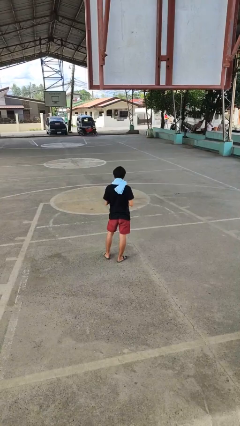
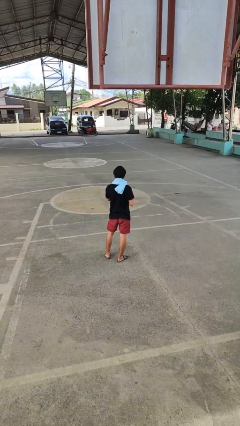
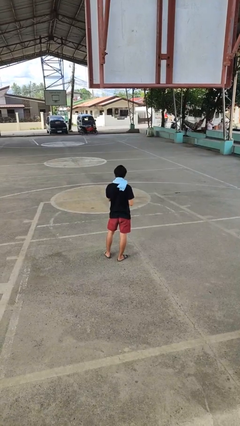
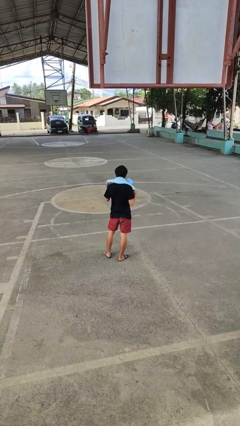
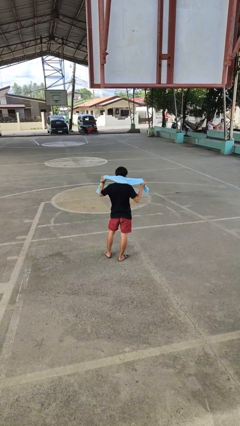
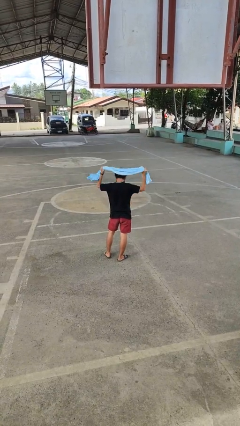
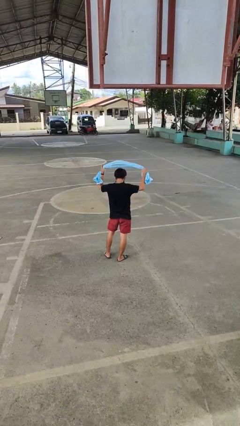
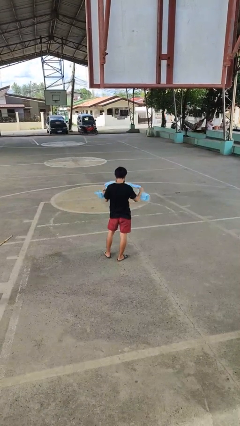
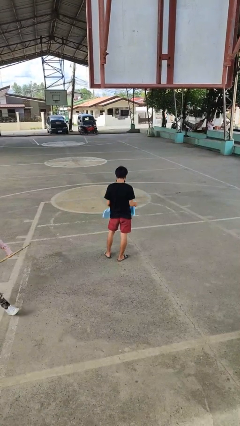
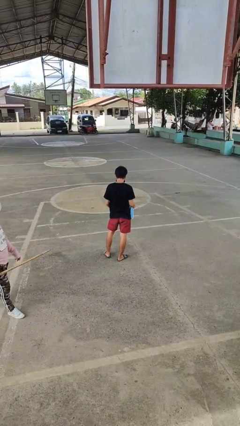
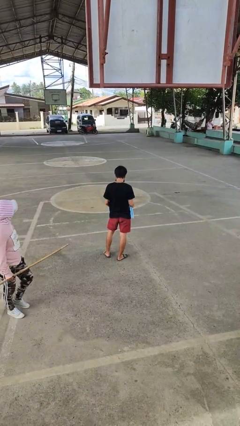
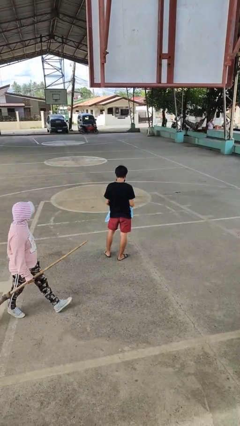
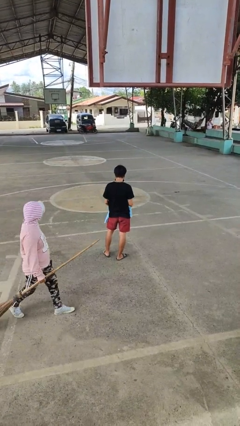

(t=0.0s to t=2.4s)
person takes off scarf

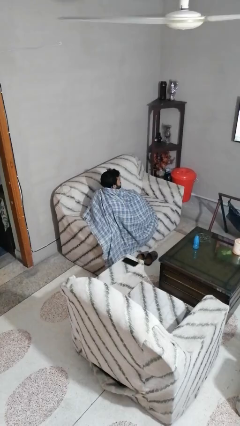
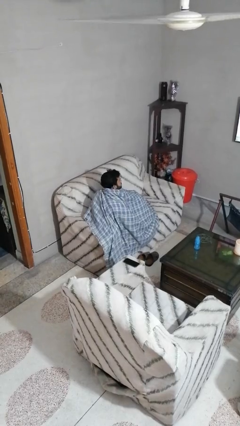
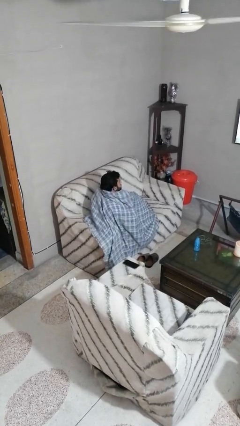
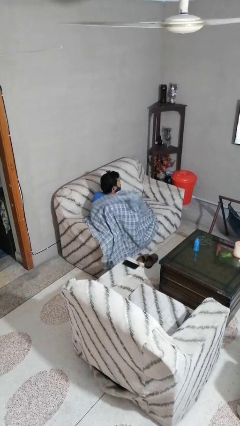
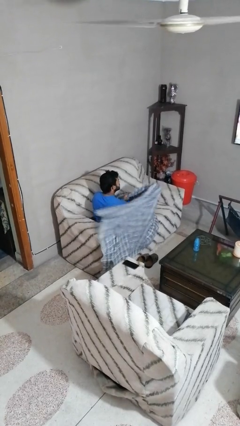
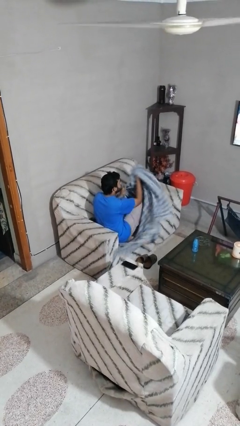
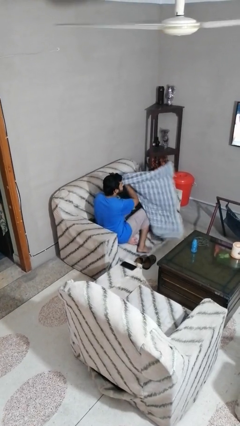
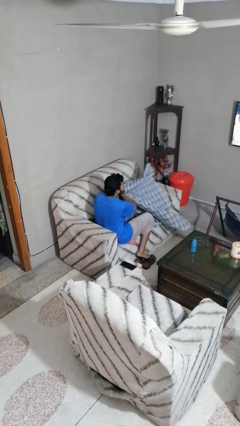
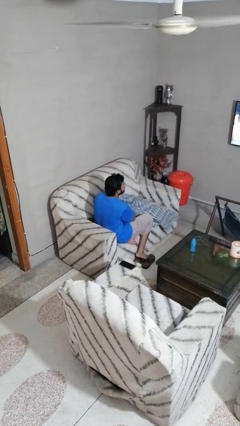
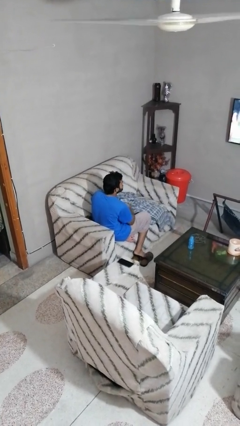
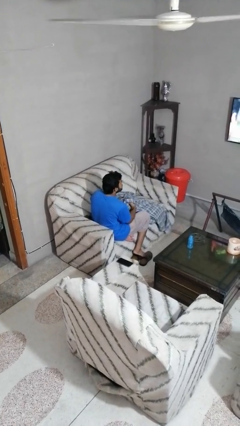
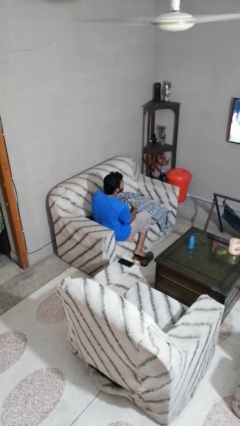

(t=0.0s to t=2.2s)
person uncovers with blanket

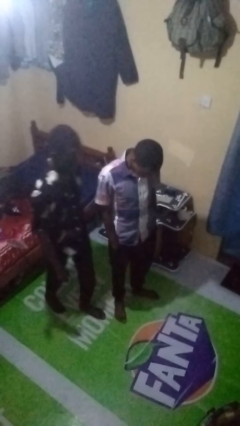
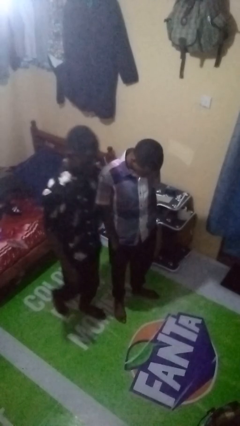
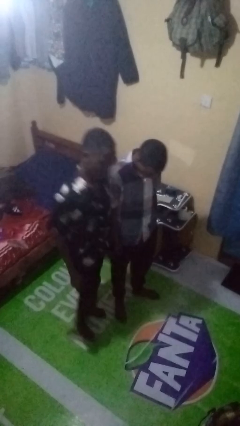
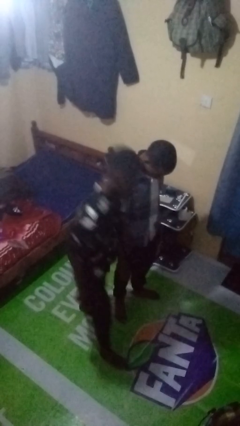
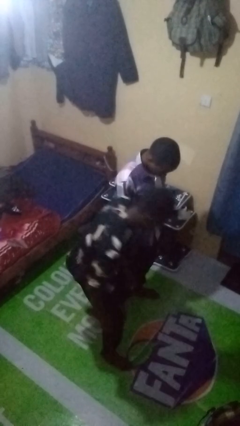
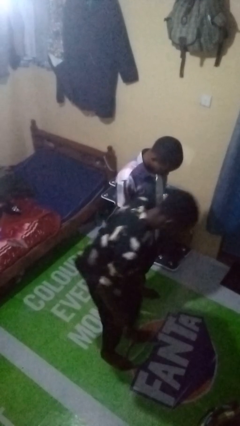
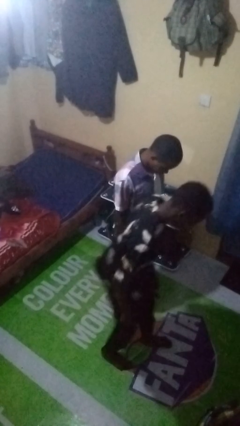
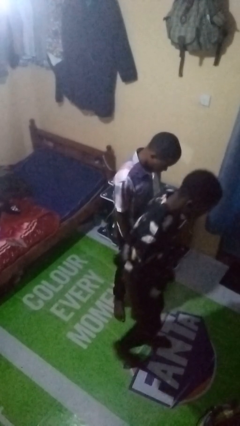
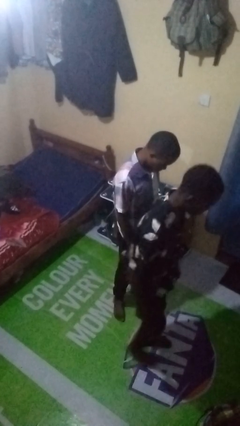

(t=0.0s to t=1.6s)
person bumps into person

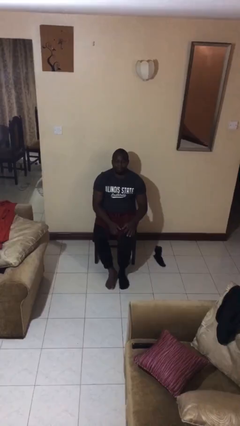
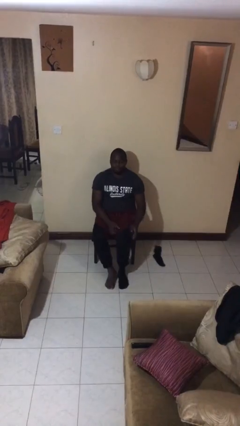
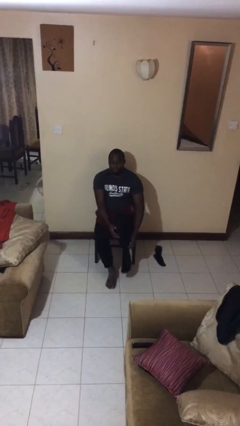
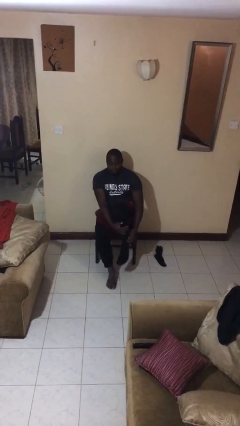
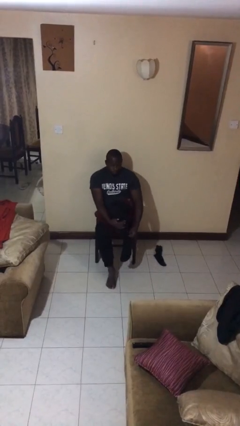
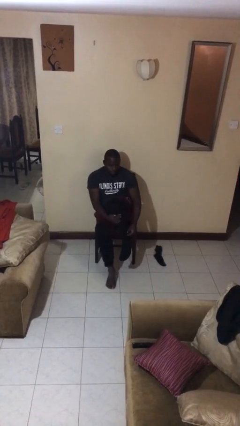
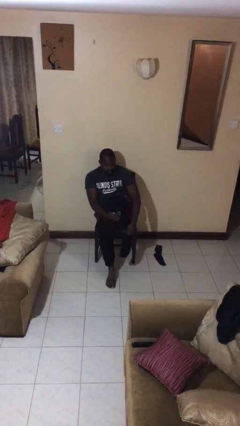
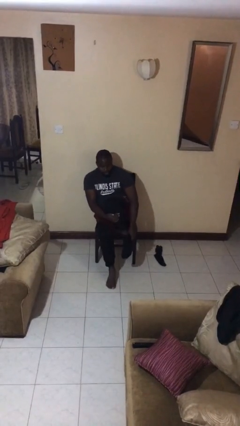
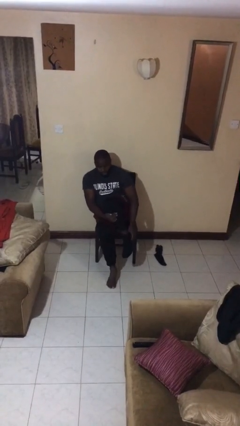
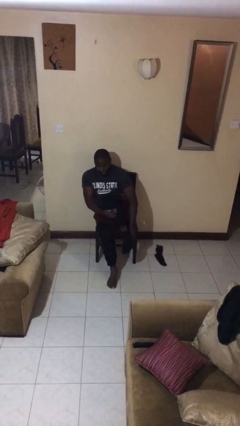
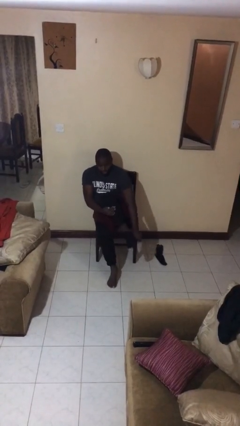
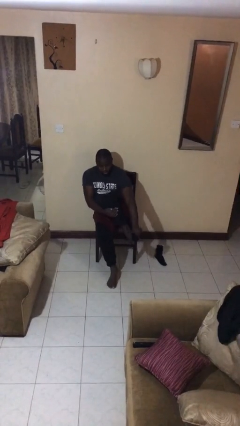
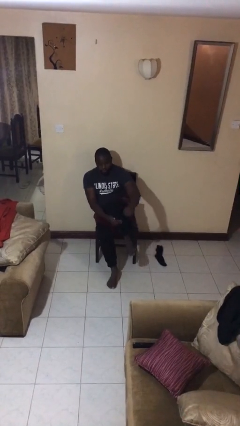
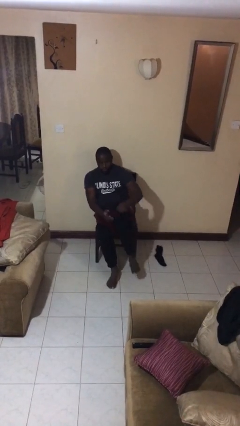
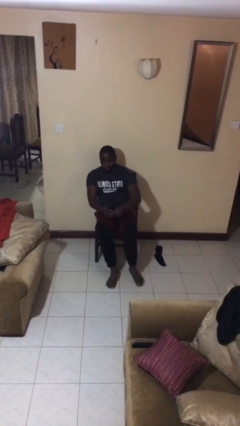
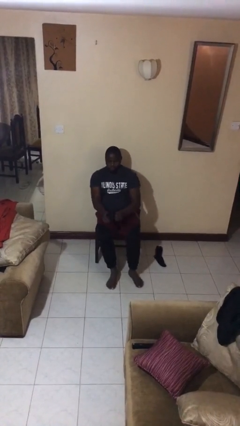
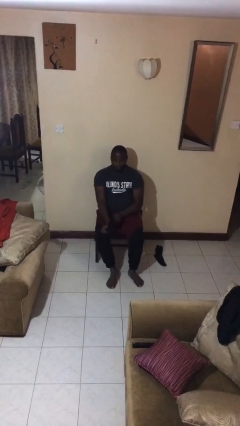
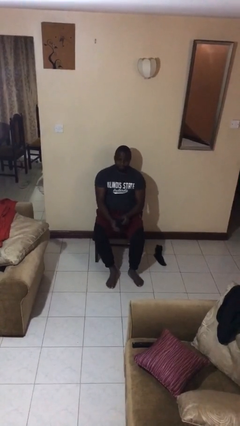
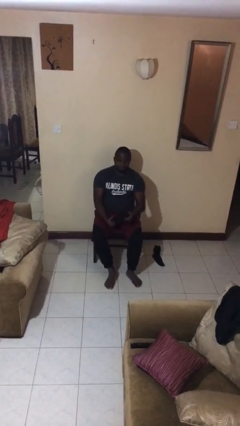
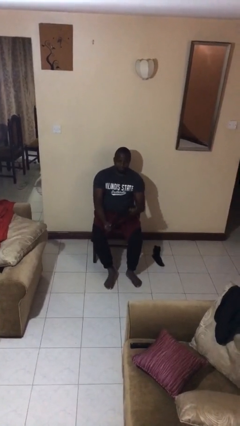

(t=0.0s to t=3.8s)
person takes off socks

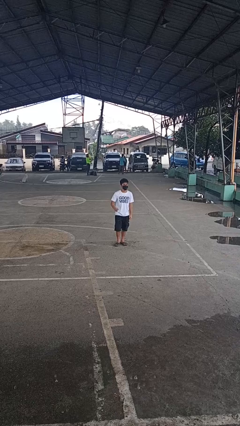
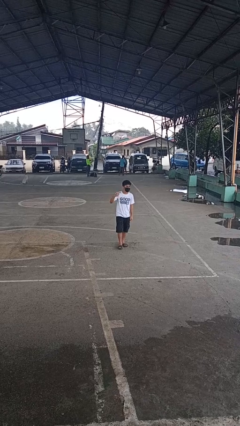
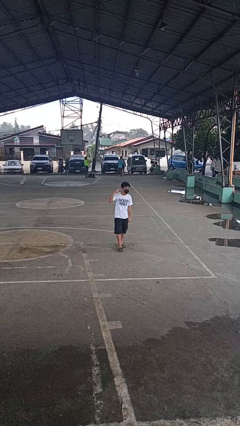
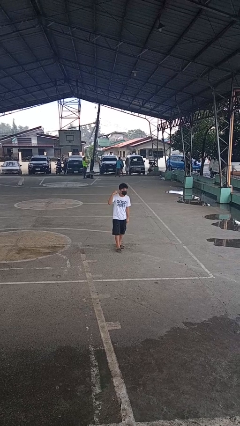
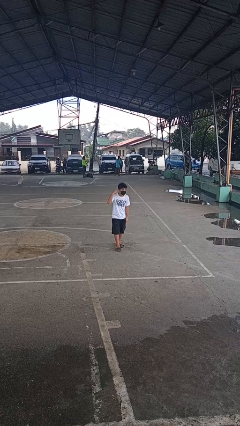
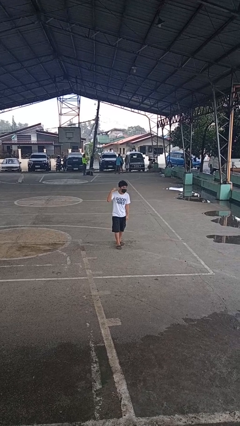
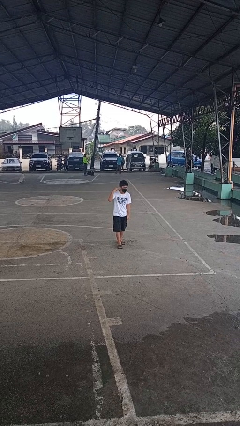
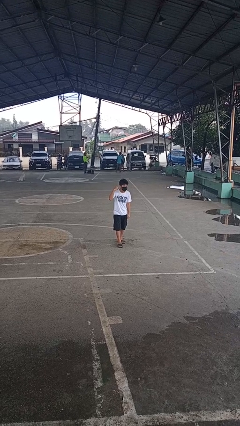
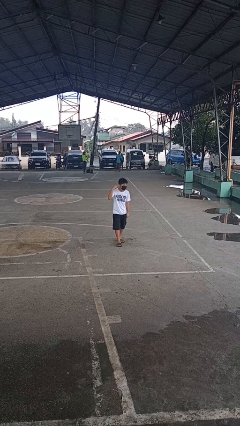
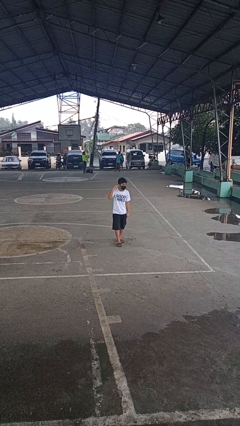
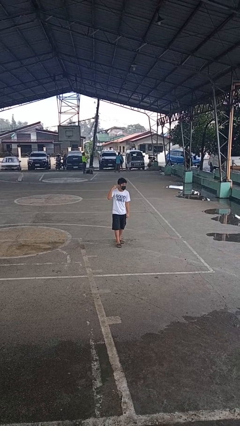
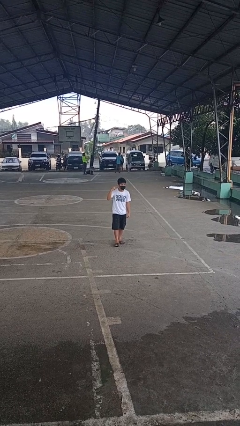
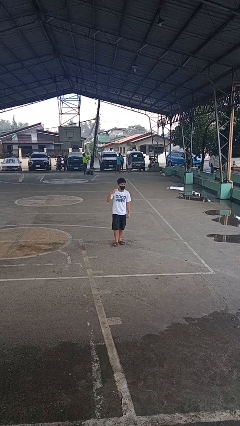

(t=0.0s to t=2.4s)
person gestures listen closely

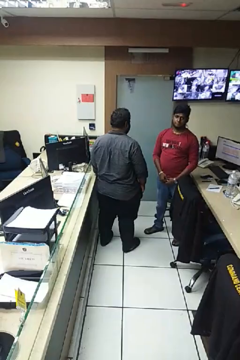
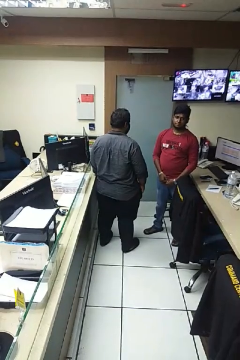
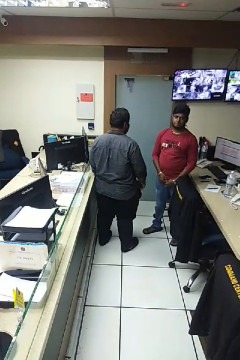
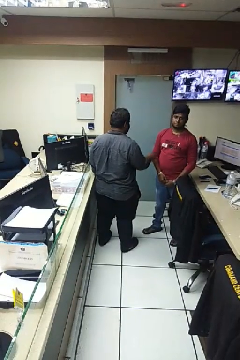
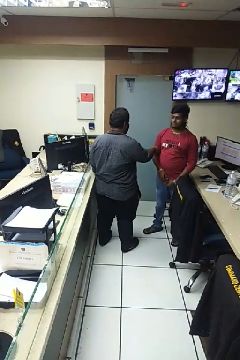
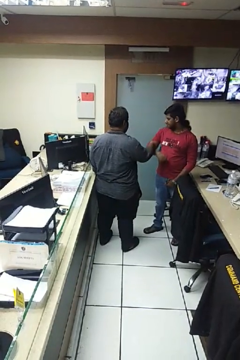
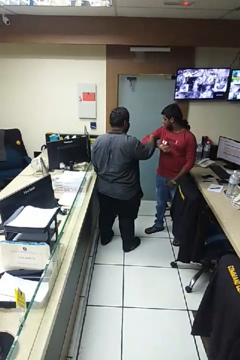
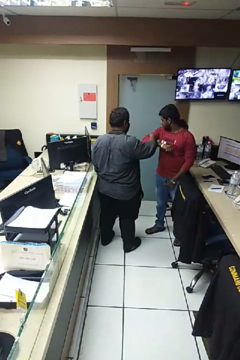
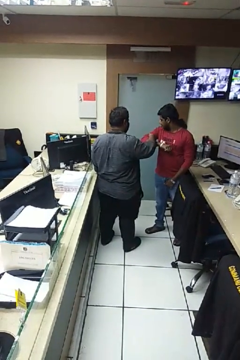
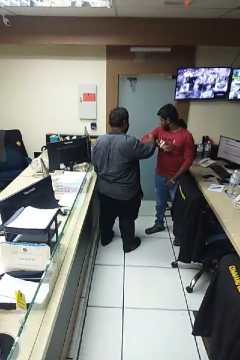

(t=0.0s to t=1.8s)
person grabs person by bicep

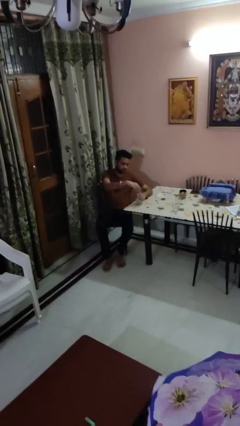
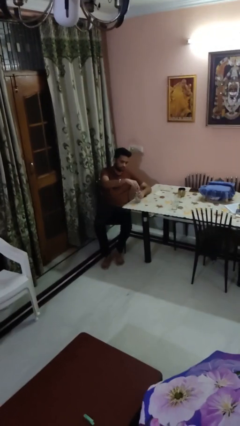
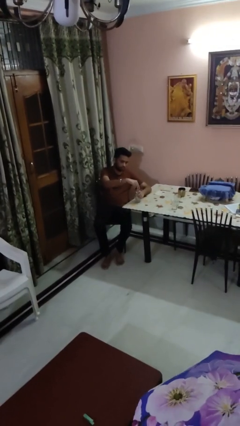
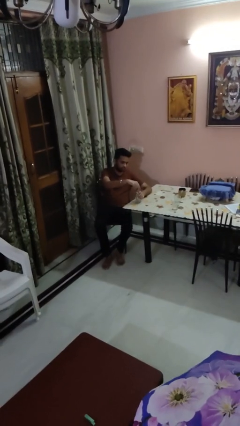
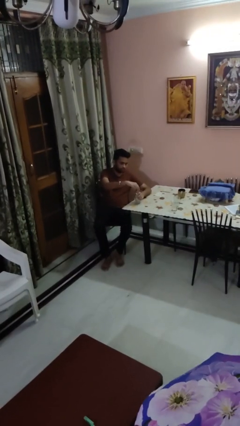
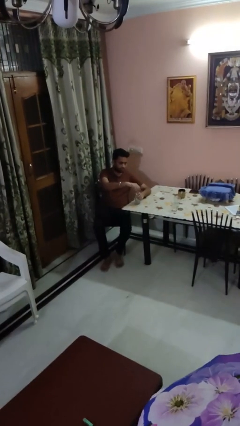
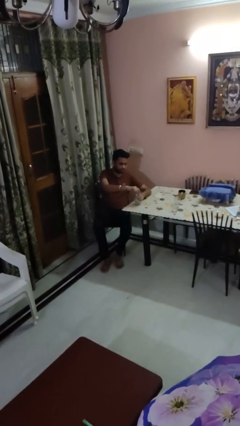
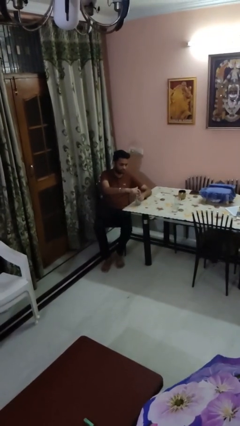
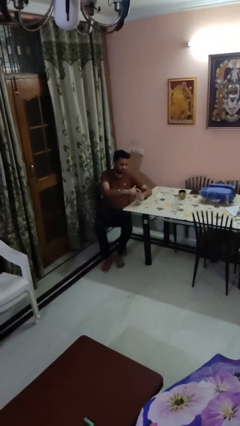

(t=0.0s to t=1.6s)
person screws lid to bottle

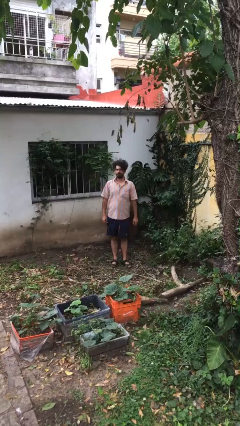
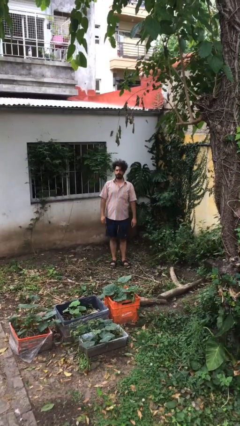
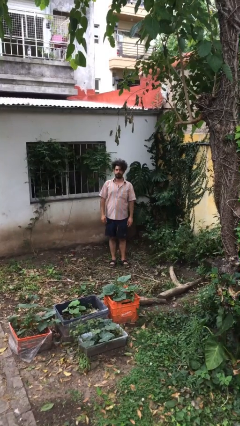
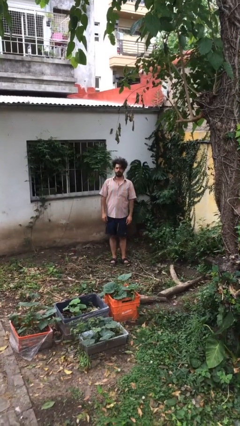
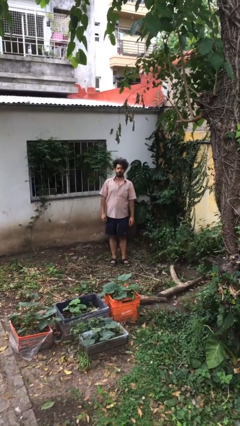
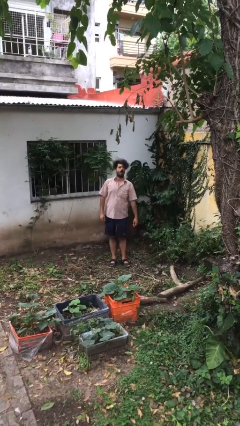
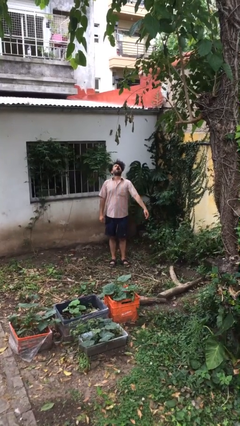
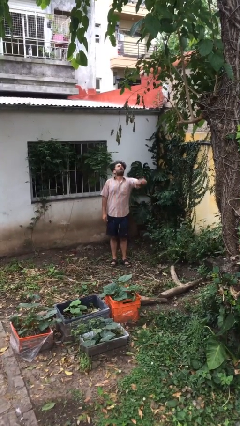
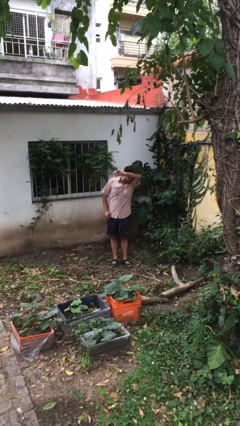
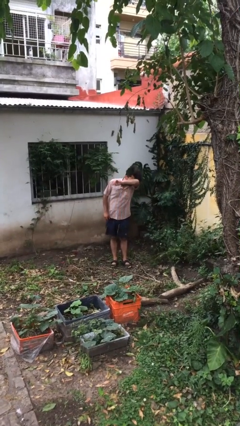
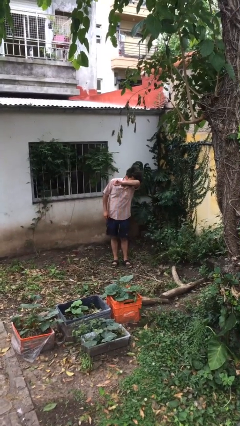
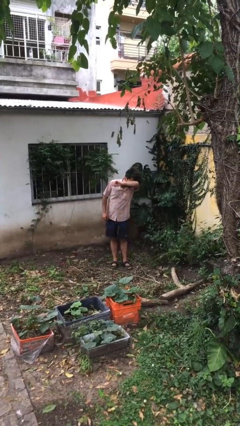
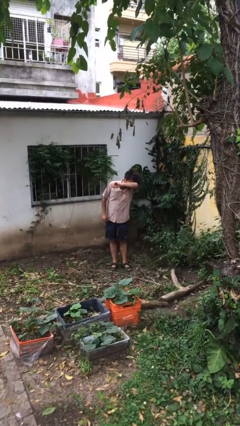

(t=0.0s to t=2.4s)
person sneezes into arm
